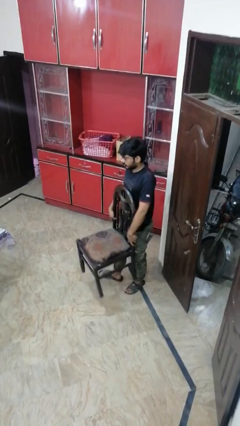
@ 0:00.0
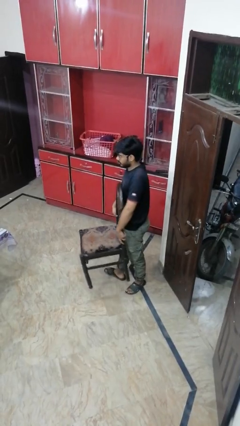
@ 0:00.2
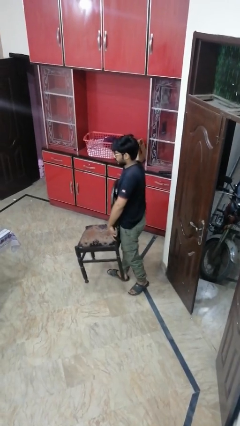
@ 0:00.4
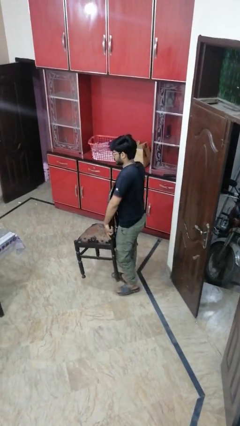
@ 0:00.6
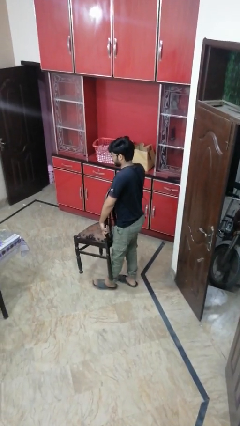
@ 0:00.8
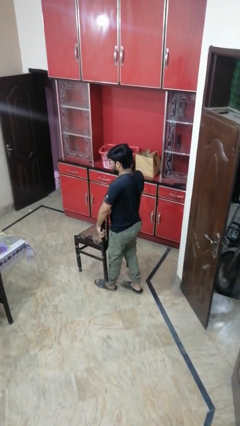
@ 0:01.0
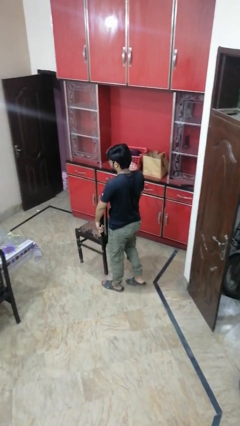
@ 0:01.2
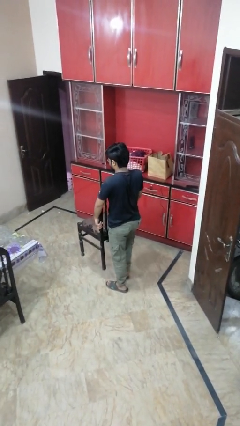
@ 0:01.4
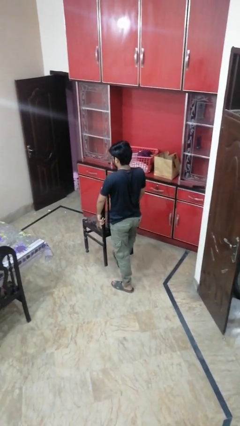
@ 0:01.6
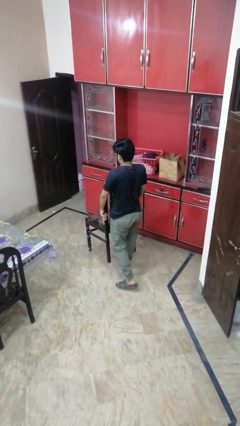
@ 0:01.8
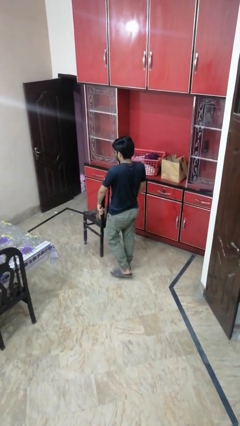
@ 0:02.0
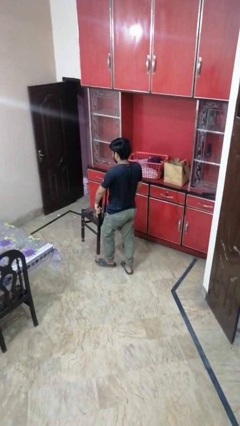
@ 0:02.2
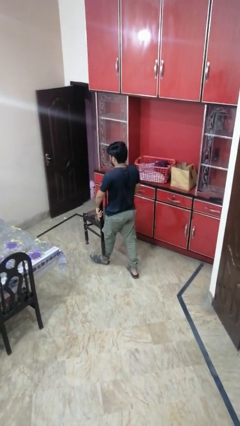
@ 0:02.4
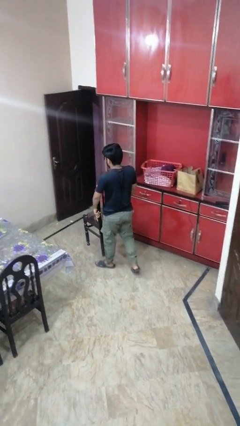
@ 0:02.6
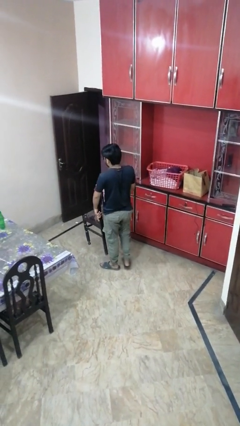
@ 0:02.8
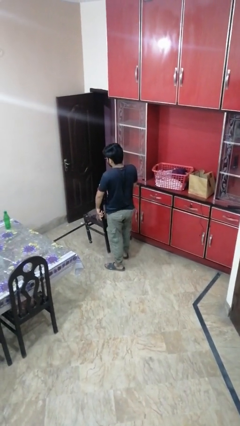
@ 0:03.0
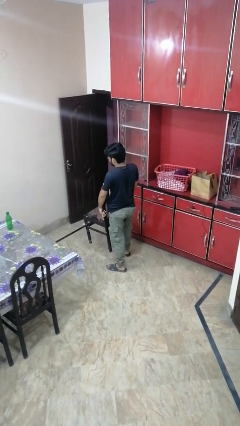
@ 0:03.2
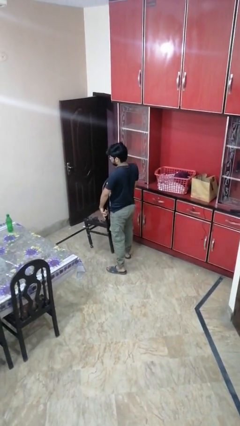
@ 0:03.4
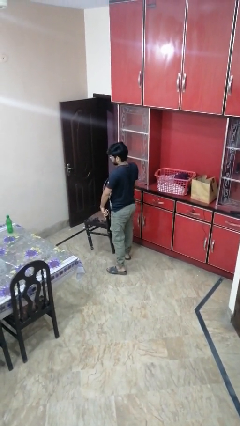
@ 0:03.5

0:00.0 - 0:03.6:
person carries furniture

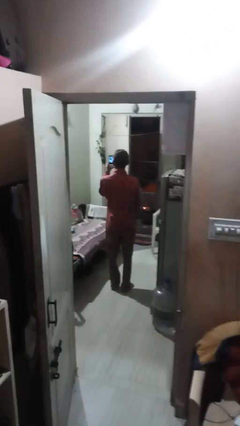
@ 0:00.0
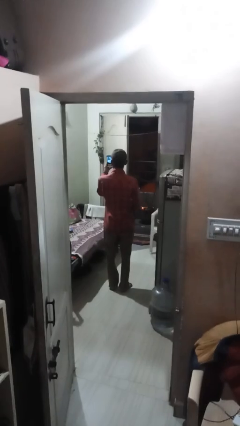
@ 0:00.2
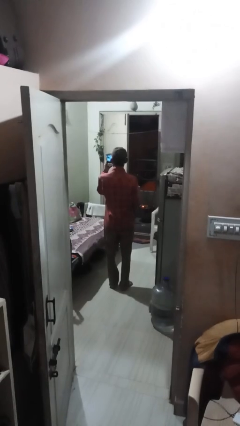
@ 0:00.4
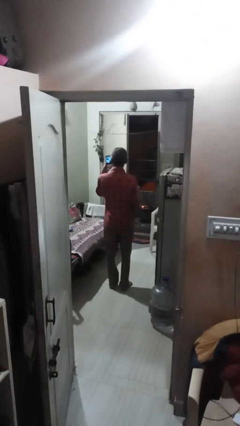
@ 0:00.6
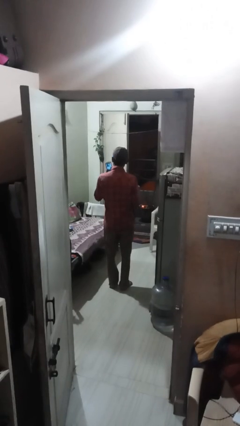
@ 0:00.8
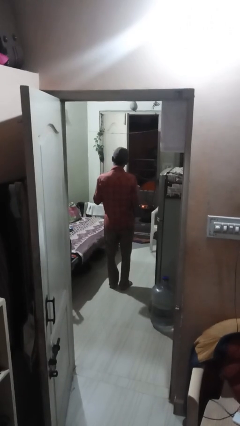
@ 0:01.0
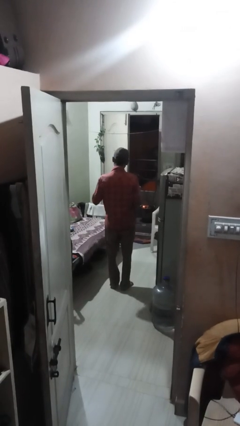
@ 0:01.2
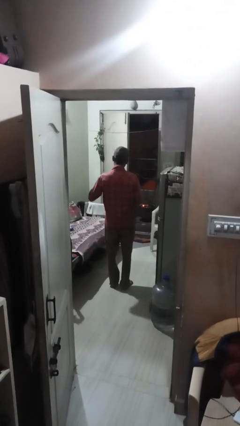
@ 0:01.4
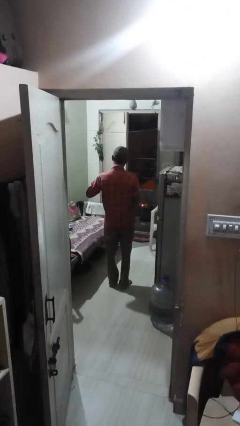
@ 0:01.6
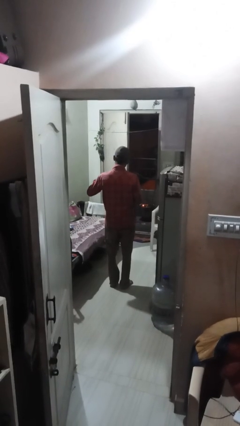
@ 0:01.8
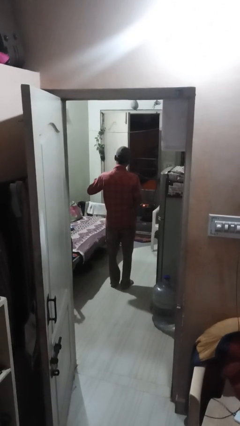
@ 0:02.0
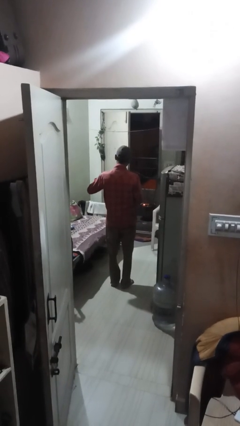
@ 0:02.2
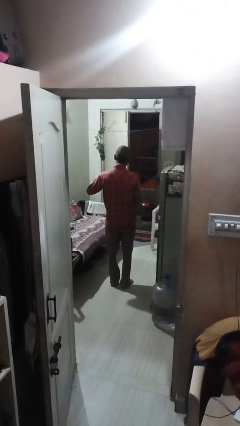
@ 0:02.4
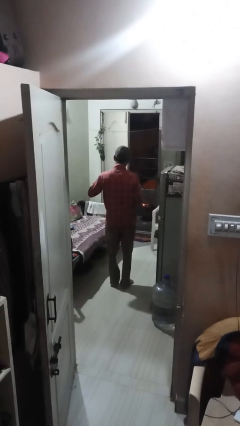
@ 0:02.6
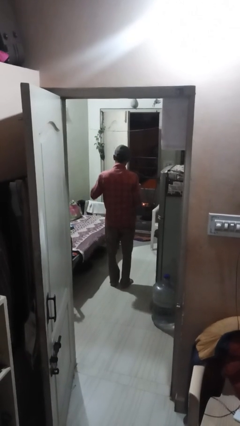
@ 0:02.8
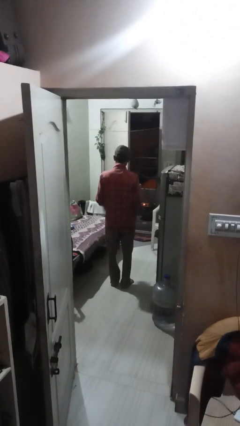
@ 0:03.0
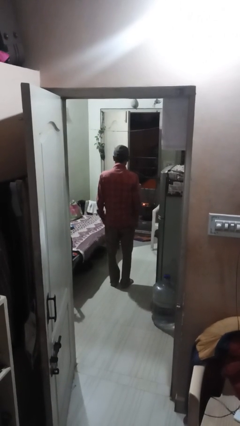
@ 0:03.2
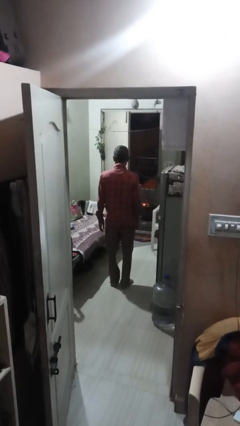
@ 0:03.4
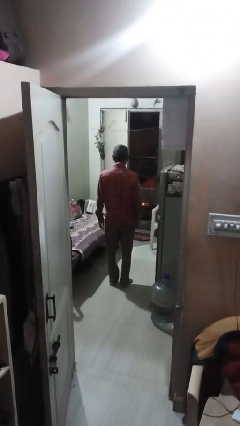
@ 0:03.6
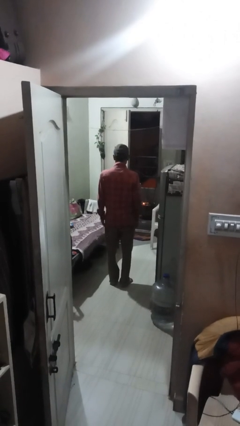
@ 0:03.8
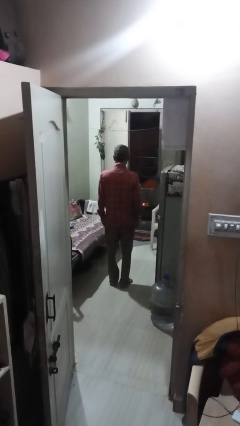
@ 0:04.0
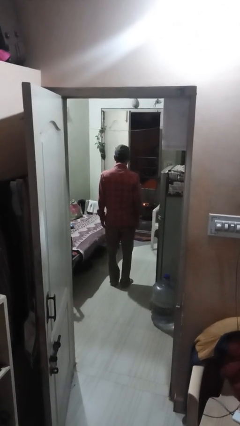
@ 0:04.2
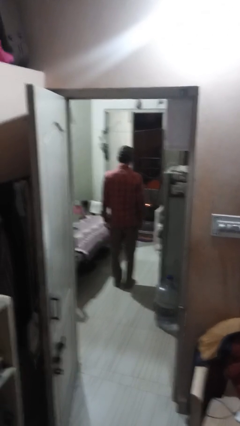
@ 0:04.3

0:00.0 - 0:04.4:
person puts phone into pocket

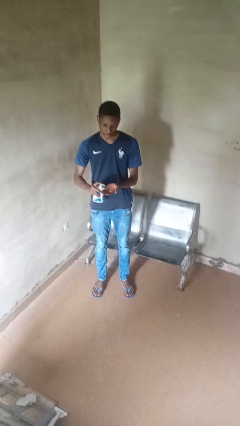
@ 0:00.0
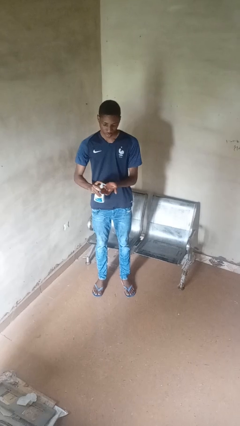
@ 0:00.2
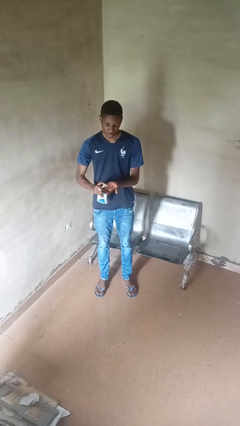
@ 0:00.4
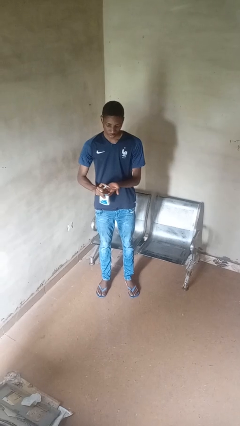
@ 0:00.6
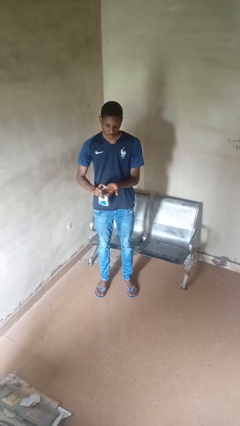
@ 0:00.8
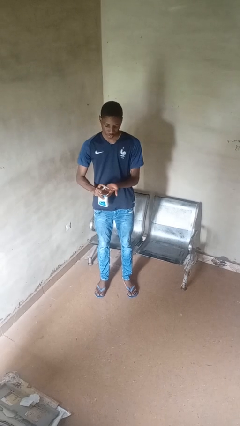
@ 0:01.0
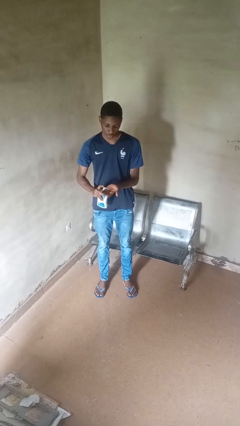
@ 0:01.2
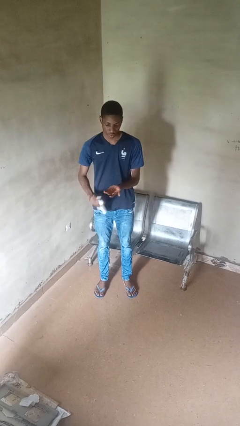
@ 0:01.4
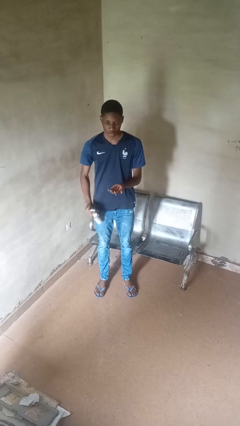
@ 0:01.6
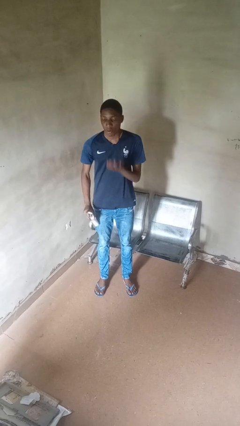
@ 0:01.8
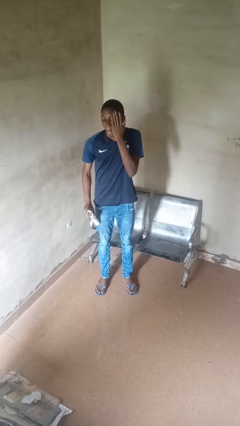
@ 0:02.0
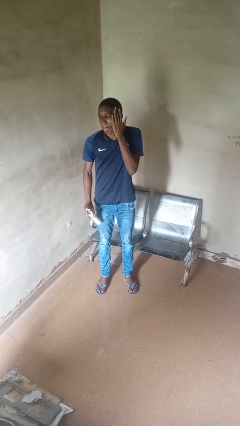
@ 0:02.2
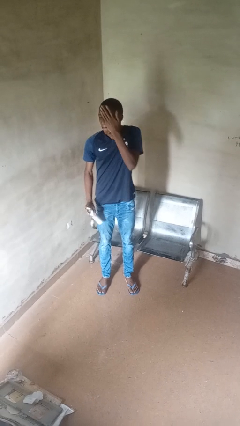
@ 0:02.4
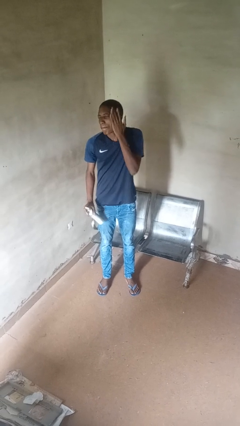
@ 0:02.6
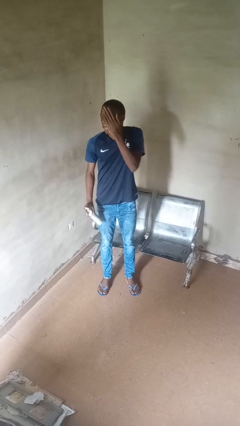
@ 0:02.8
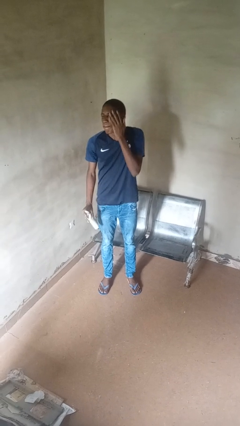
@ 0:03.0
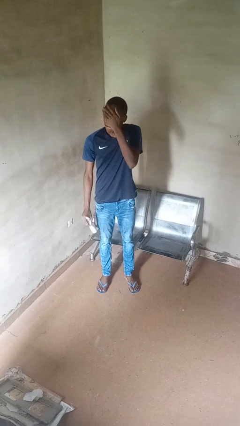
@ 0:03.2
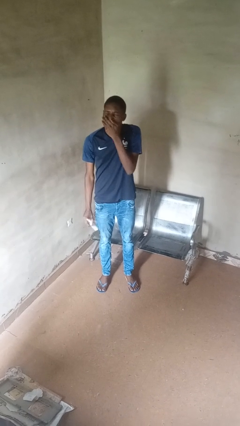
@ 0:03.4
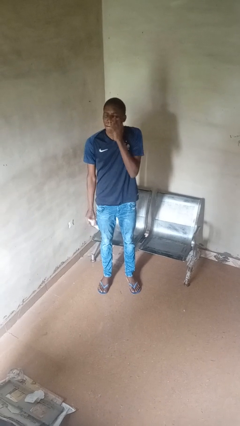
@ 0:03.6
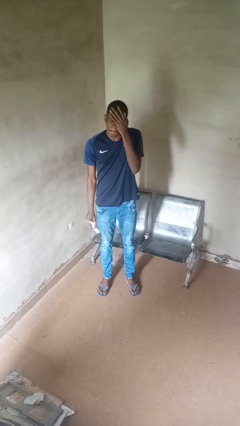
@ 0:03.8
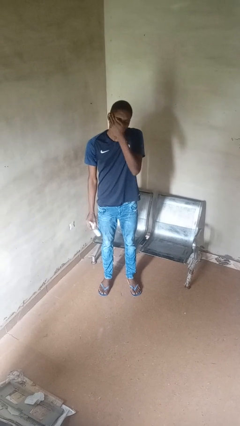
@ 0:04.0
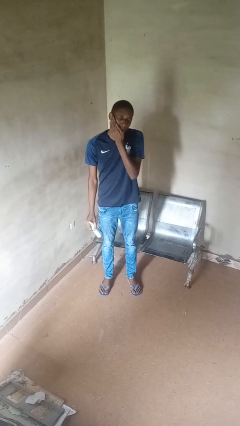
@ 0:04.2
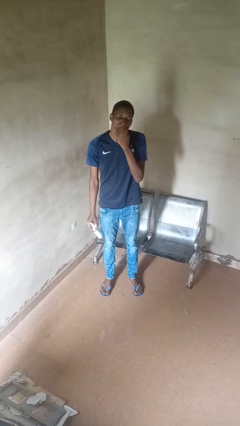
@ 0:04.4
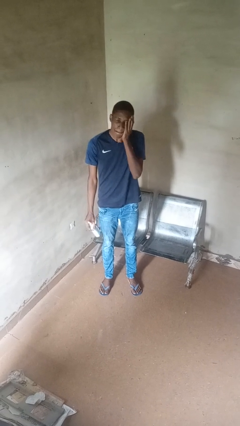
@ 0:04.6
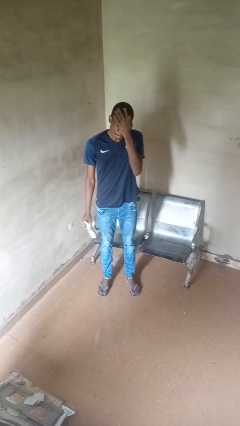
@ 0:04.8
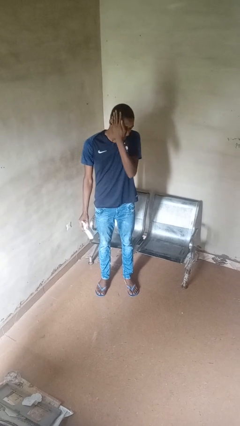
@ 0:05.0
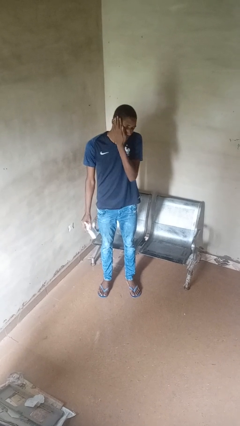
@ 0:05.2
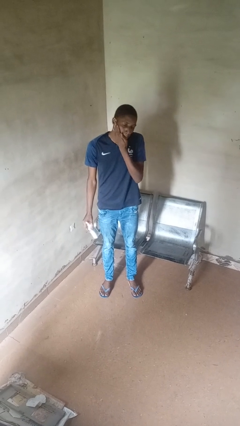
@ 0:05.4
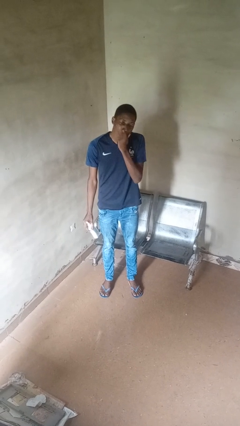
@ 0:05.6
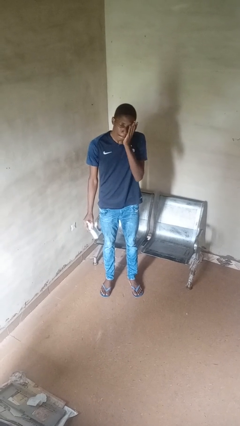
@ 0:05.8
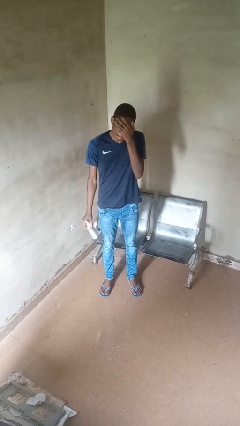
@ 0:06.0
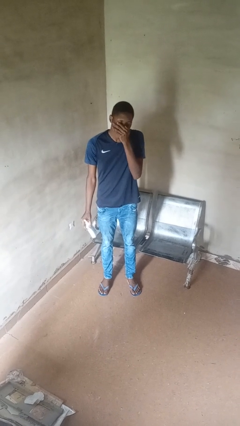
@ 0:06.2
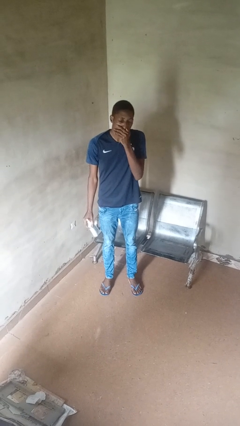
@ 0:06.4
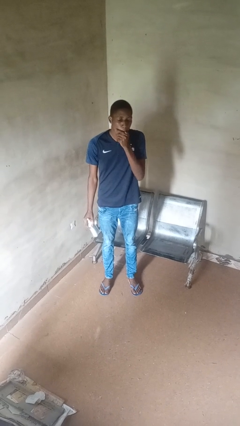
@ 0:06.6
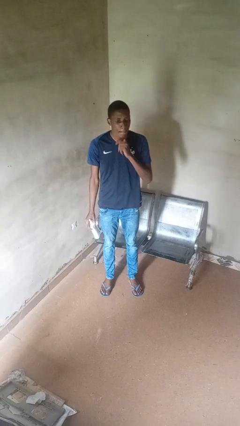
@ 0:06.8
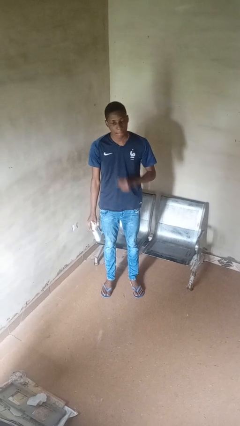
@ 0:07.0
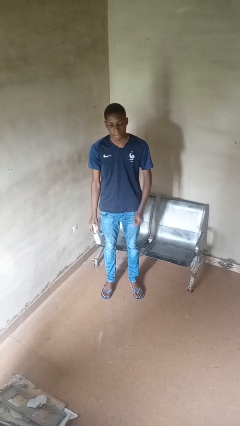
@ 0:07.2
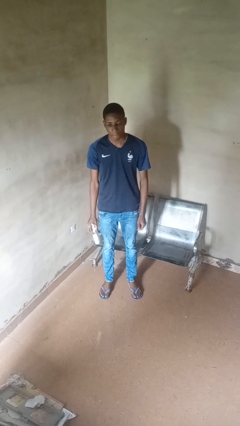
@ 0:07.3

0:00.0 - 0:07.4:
person applies facial moisturizer

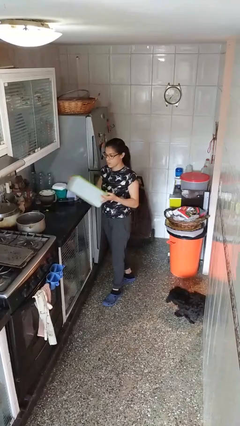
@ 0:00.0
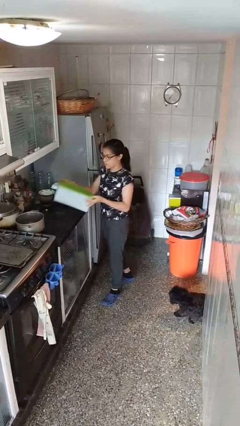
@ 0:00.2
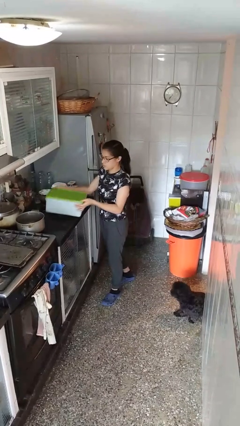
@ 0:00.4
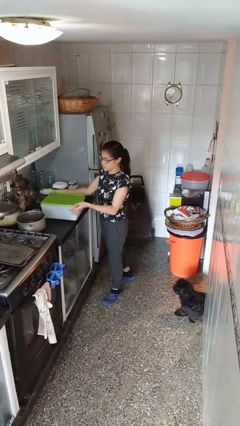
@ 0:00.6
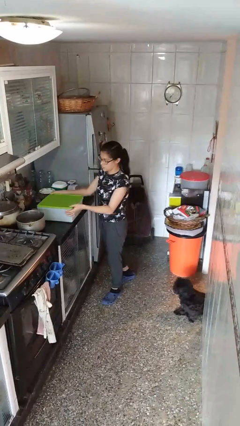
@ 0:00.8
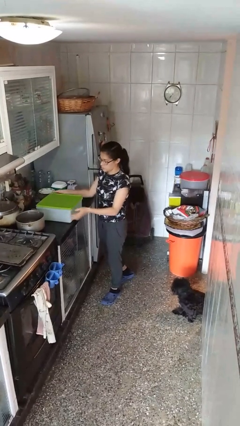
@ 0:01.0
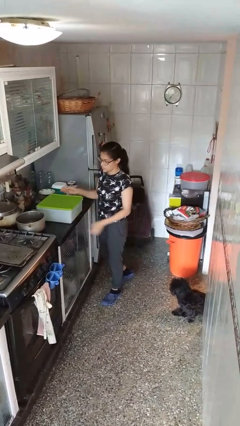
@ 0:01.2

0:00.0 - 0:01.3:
person puts down object on countertop

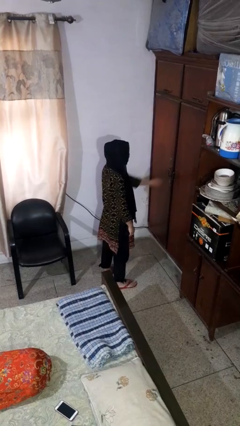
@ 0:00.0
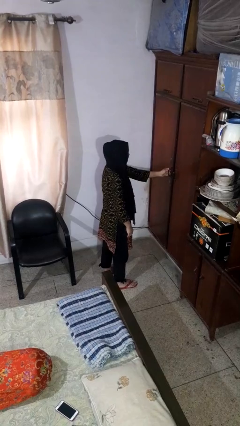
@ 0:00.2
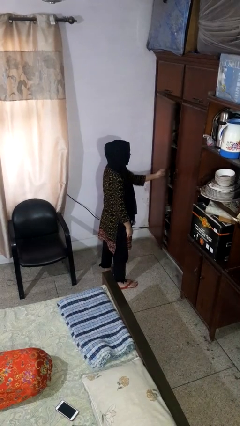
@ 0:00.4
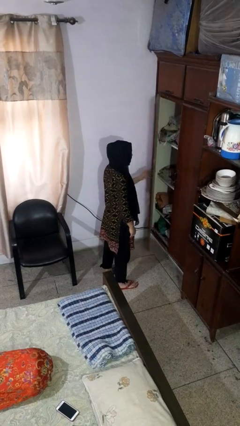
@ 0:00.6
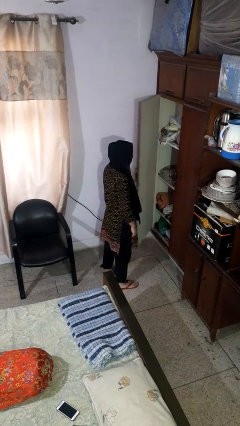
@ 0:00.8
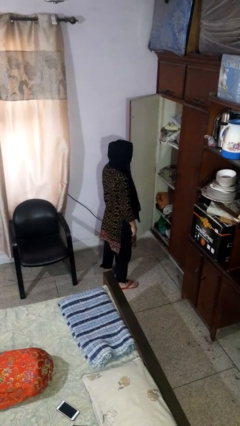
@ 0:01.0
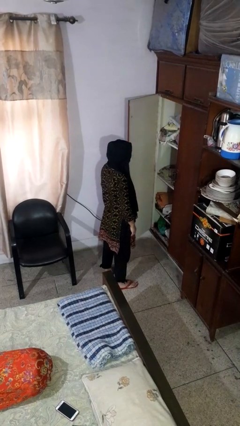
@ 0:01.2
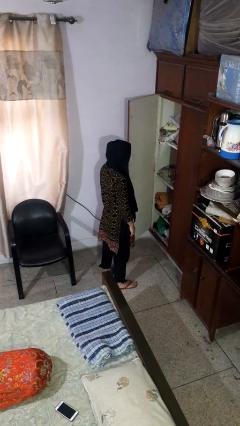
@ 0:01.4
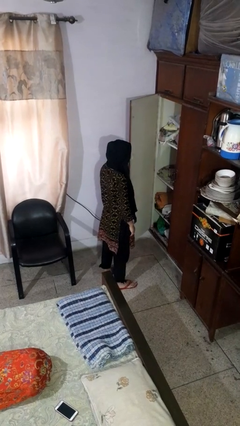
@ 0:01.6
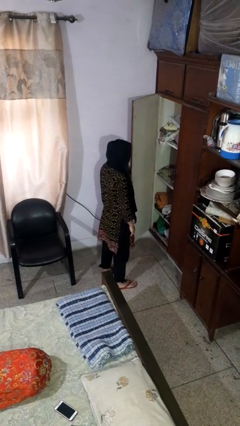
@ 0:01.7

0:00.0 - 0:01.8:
person opens closet door
